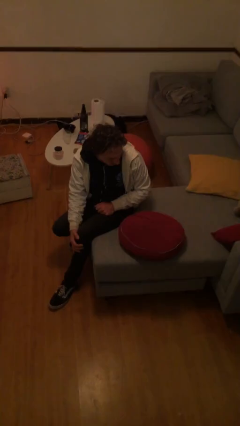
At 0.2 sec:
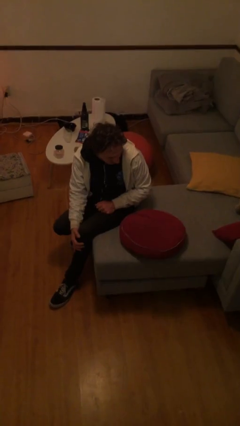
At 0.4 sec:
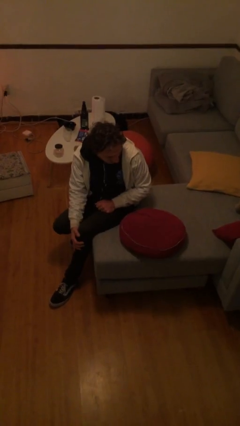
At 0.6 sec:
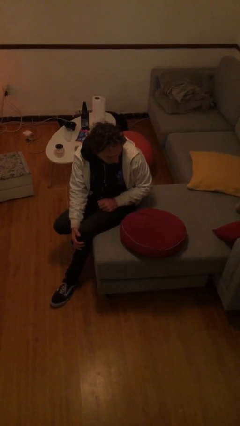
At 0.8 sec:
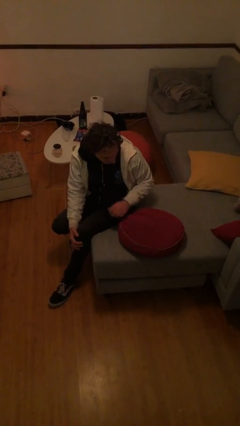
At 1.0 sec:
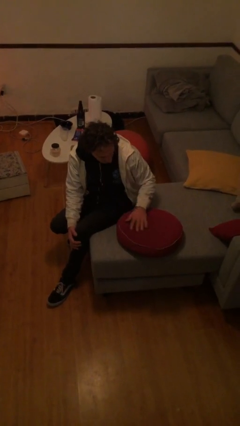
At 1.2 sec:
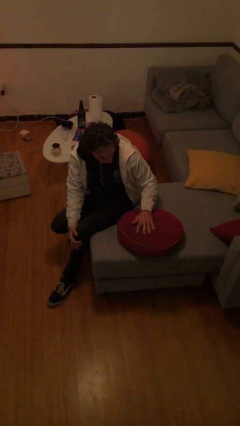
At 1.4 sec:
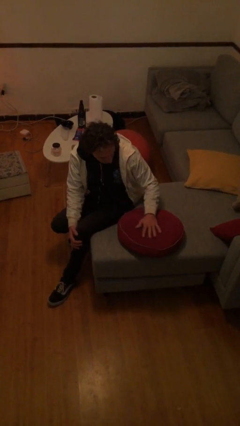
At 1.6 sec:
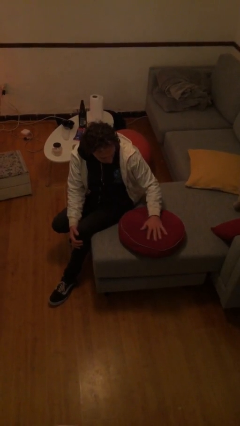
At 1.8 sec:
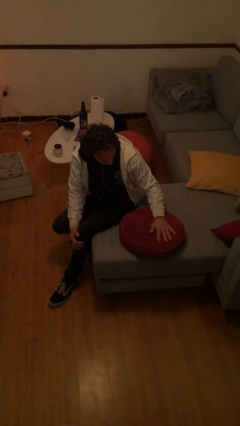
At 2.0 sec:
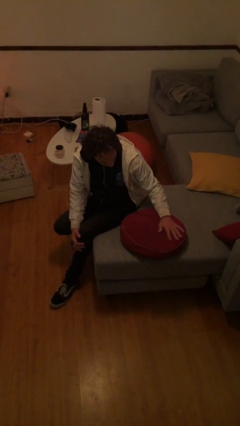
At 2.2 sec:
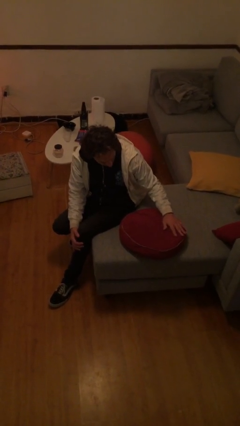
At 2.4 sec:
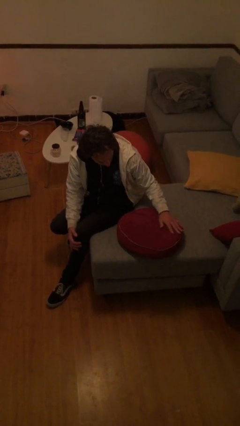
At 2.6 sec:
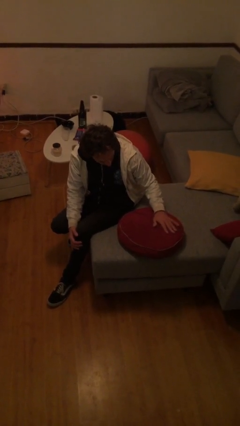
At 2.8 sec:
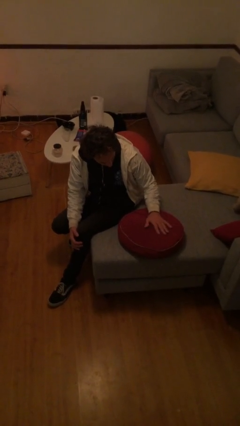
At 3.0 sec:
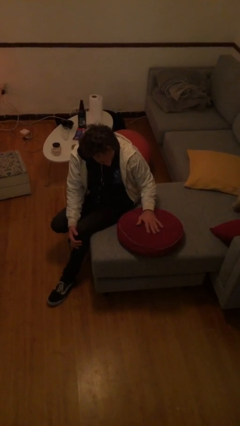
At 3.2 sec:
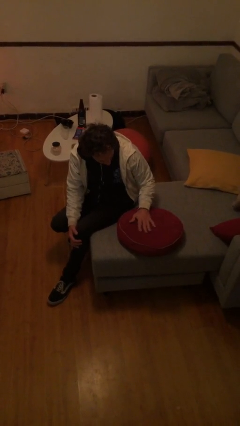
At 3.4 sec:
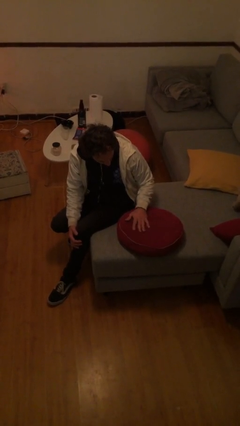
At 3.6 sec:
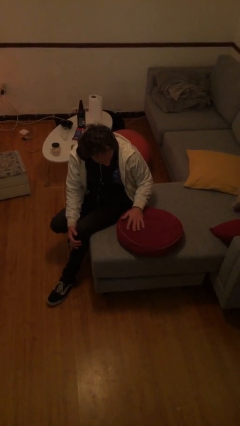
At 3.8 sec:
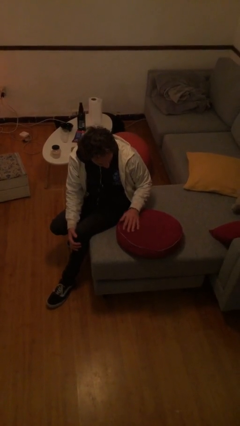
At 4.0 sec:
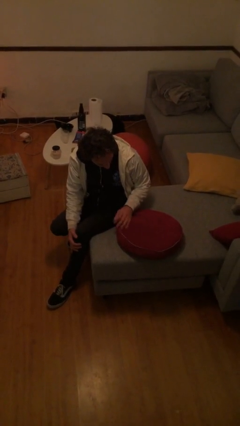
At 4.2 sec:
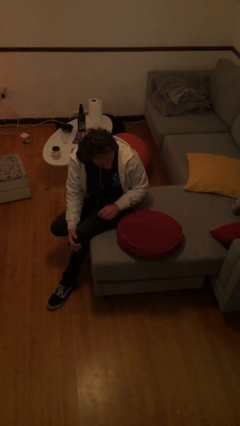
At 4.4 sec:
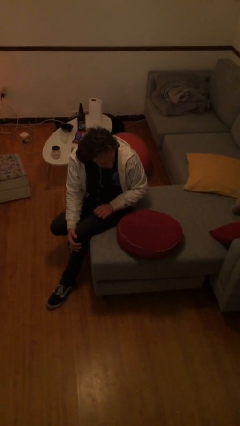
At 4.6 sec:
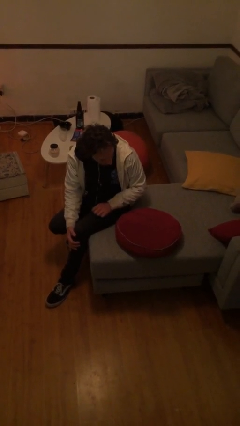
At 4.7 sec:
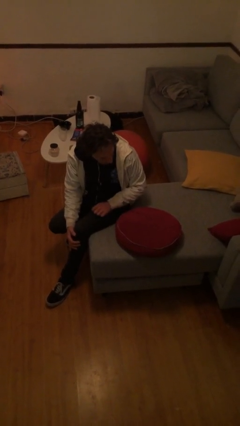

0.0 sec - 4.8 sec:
person waves hand over object

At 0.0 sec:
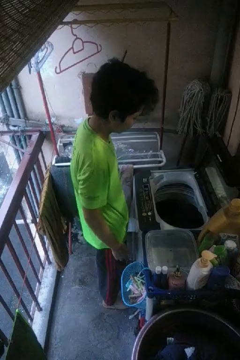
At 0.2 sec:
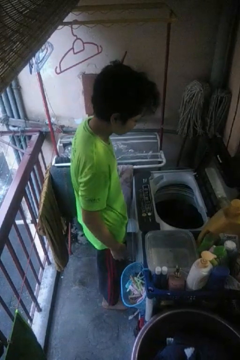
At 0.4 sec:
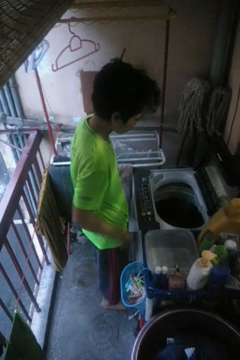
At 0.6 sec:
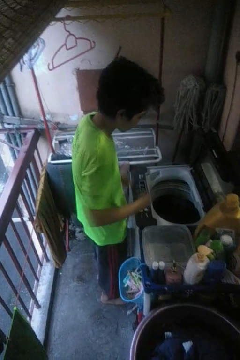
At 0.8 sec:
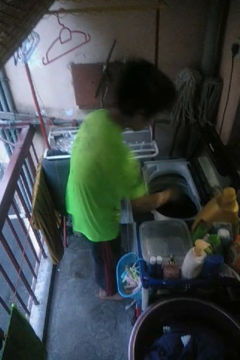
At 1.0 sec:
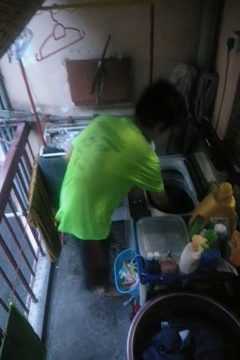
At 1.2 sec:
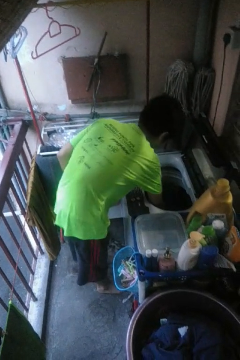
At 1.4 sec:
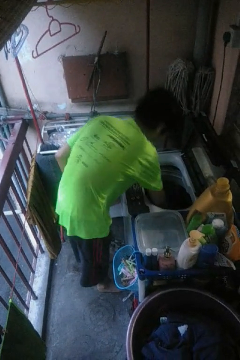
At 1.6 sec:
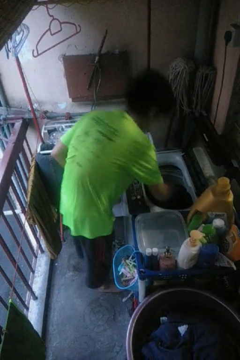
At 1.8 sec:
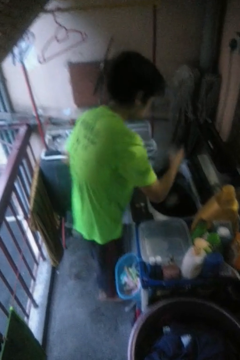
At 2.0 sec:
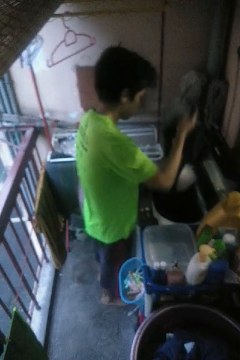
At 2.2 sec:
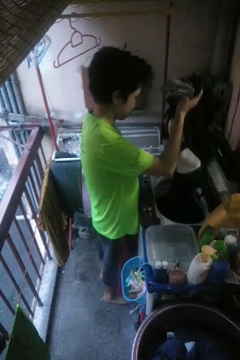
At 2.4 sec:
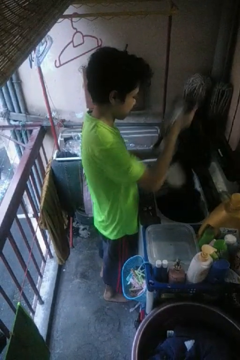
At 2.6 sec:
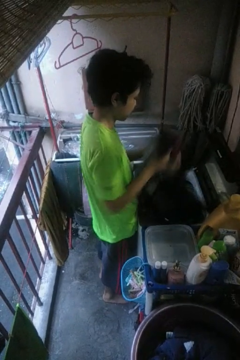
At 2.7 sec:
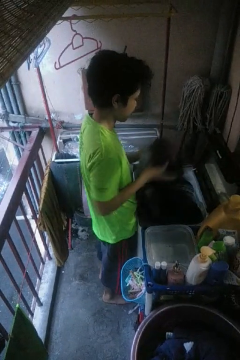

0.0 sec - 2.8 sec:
person unloads clotheswasher

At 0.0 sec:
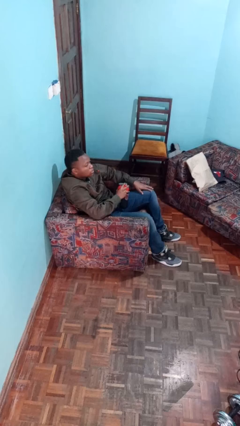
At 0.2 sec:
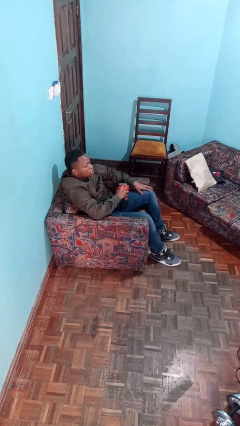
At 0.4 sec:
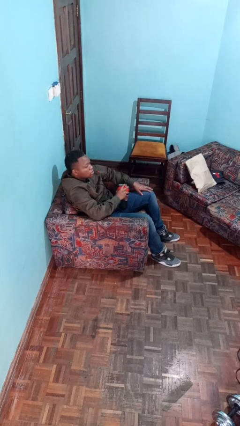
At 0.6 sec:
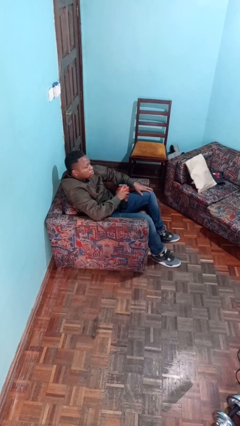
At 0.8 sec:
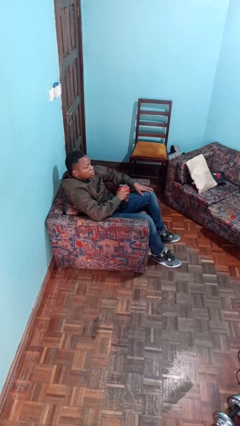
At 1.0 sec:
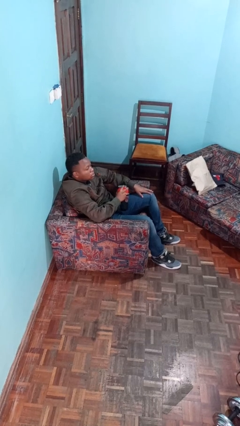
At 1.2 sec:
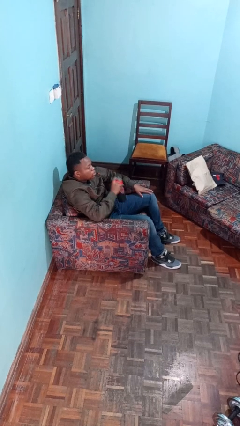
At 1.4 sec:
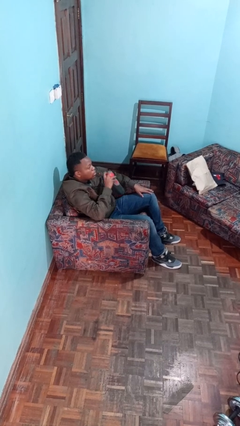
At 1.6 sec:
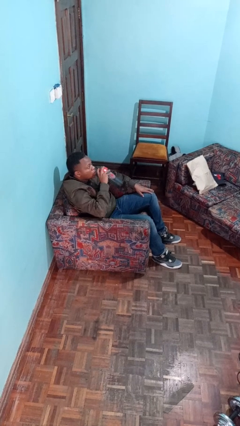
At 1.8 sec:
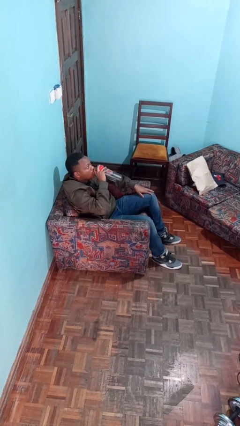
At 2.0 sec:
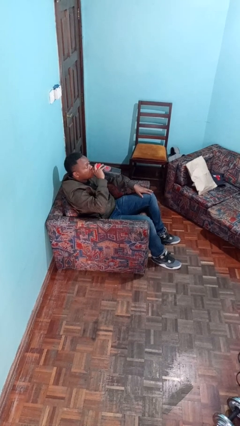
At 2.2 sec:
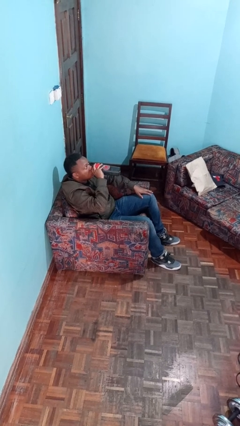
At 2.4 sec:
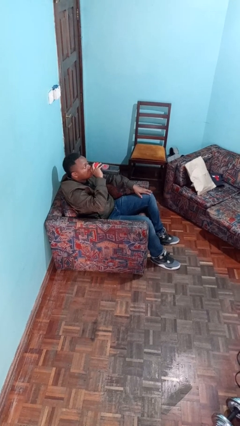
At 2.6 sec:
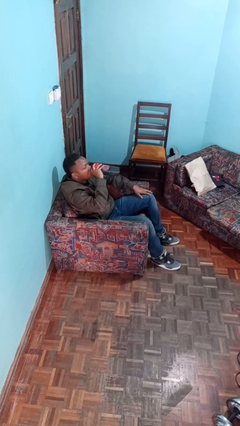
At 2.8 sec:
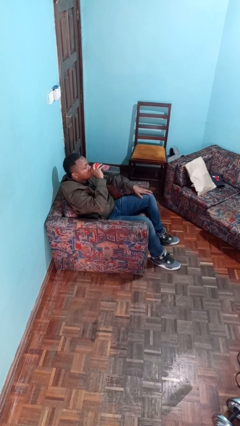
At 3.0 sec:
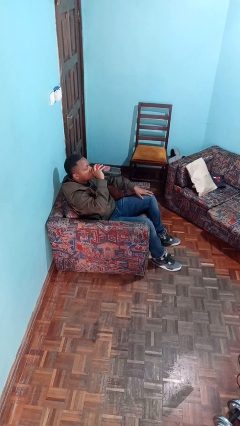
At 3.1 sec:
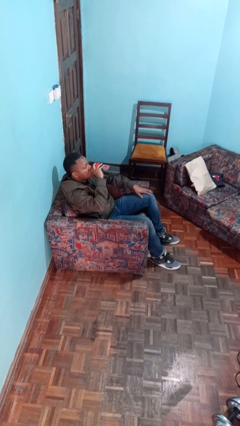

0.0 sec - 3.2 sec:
person drinks from bottle

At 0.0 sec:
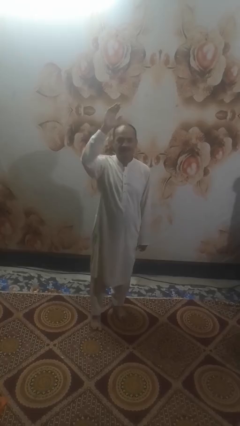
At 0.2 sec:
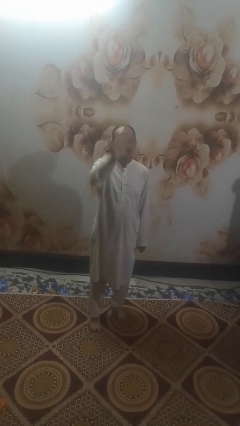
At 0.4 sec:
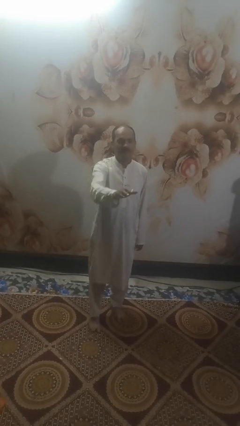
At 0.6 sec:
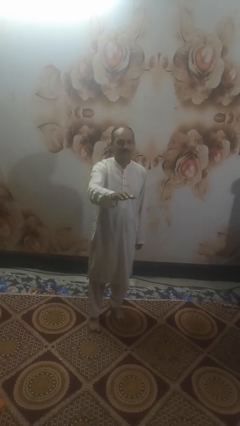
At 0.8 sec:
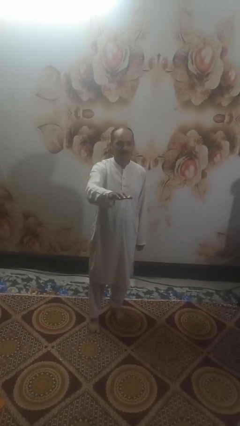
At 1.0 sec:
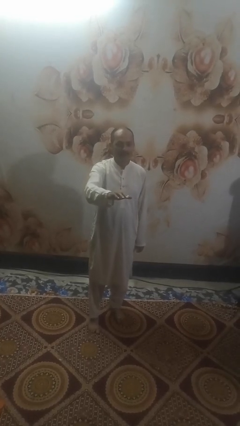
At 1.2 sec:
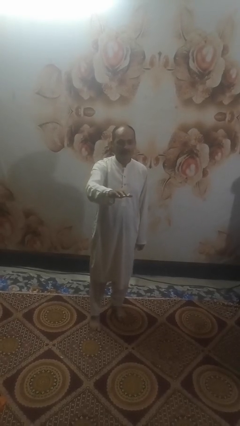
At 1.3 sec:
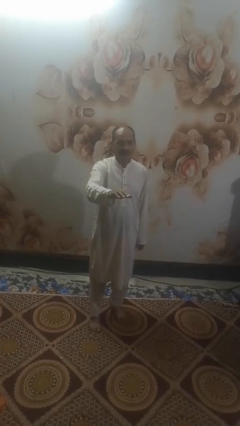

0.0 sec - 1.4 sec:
person gestures swipe down

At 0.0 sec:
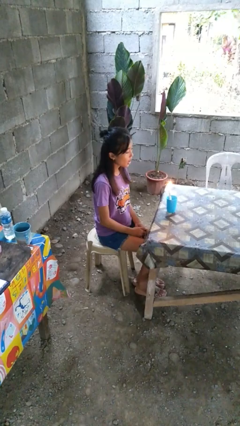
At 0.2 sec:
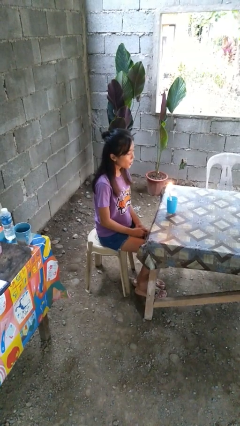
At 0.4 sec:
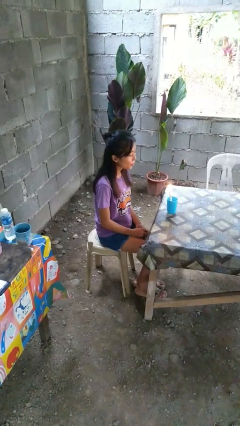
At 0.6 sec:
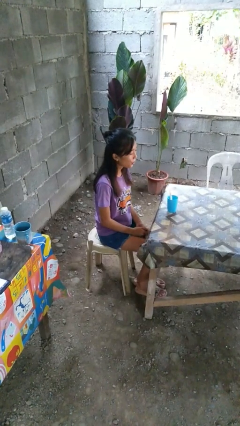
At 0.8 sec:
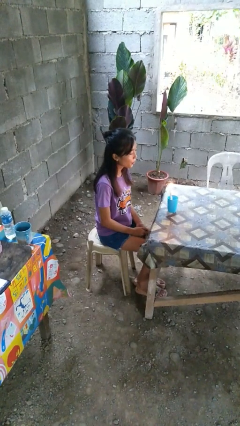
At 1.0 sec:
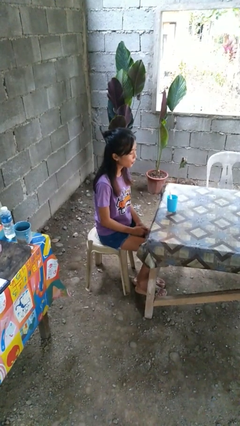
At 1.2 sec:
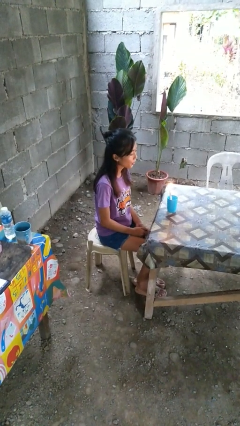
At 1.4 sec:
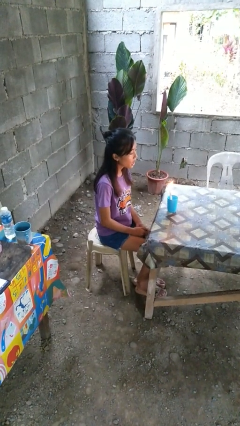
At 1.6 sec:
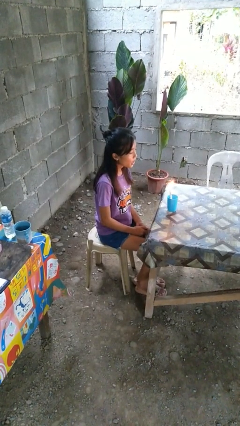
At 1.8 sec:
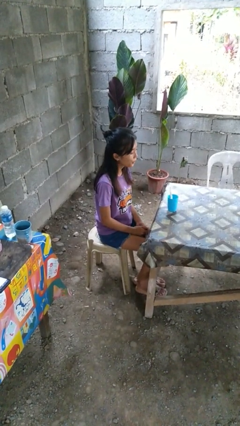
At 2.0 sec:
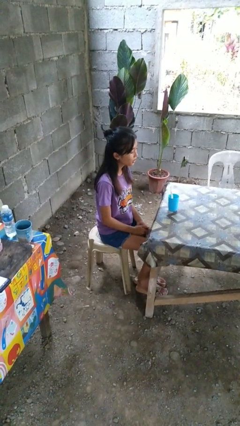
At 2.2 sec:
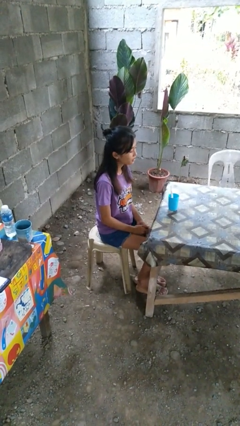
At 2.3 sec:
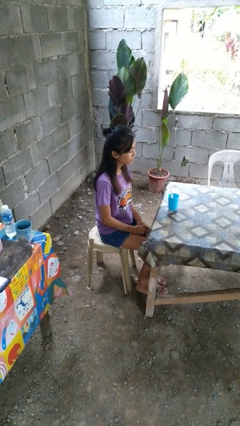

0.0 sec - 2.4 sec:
person extinguishes candle

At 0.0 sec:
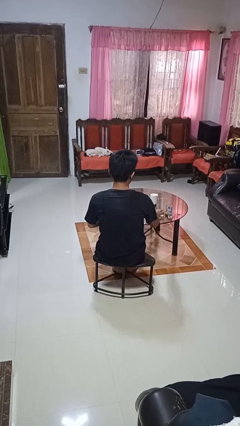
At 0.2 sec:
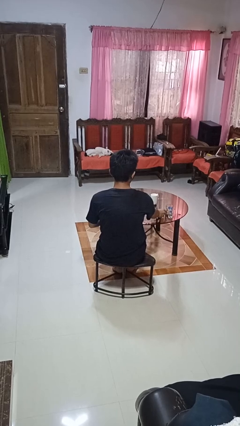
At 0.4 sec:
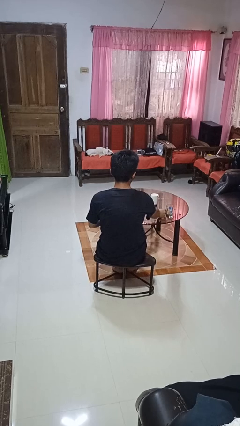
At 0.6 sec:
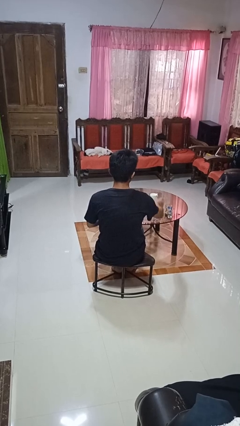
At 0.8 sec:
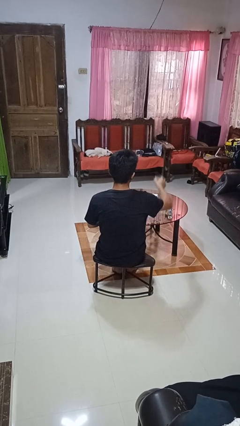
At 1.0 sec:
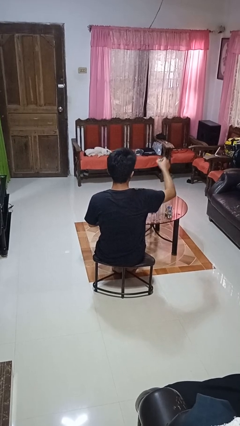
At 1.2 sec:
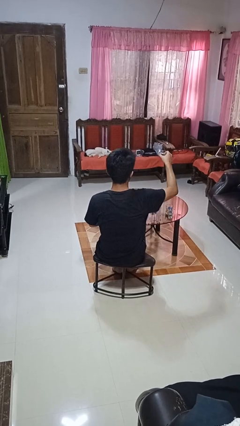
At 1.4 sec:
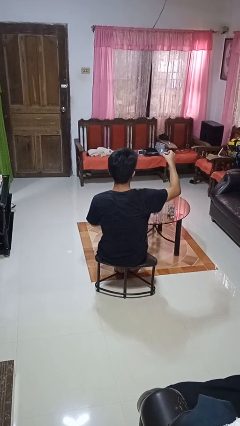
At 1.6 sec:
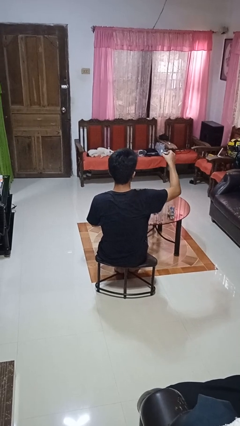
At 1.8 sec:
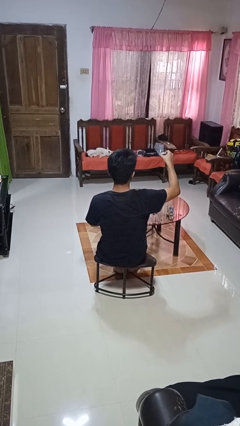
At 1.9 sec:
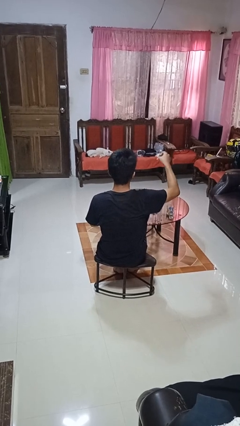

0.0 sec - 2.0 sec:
person picks up object from table

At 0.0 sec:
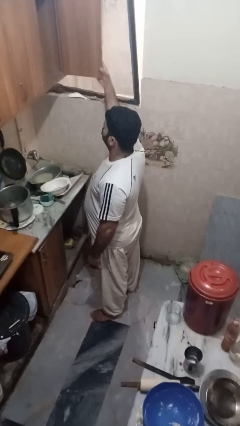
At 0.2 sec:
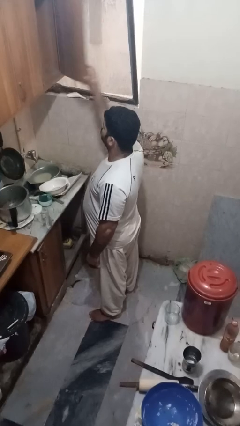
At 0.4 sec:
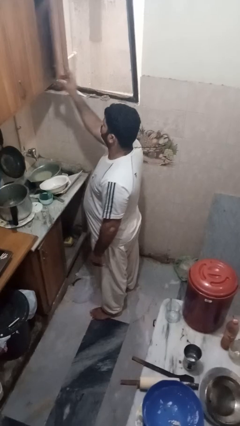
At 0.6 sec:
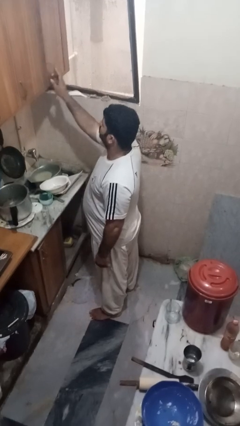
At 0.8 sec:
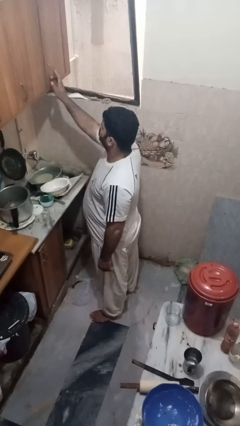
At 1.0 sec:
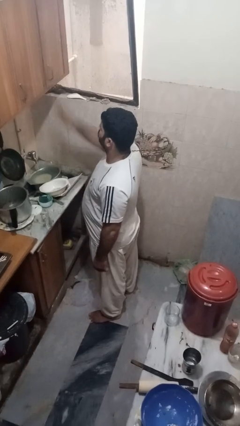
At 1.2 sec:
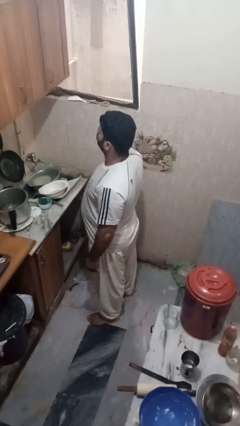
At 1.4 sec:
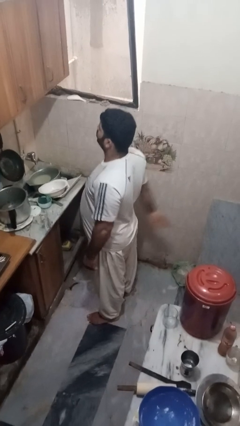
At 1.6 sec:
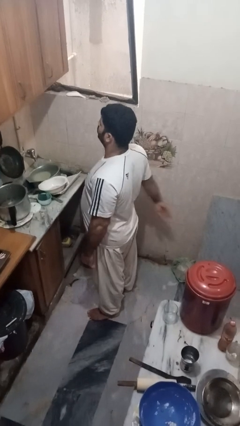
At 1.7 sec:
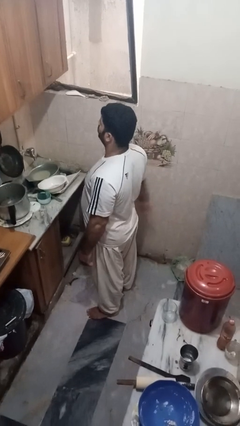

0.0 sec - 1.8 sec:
person closes cabinet
